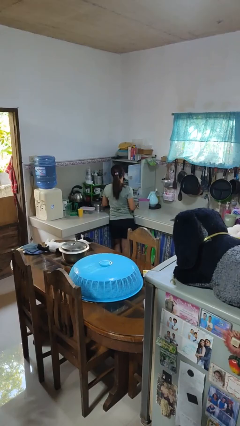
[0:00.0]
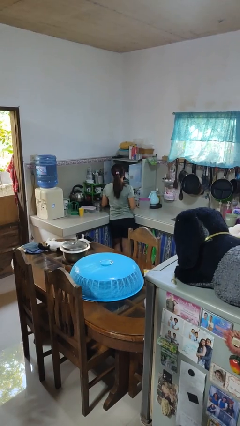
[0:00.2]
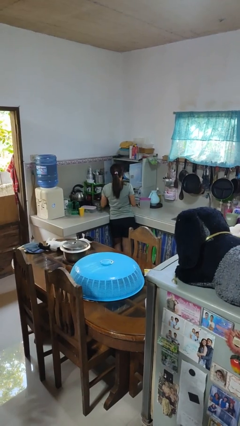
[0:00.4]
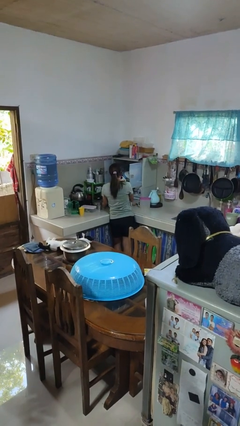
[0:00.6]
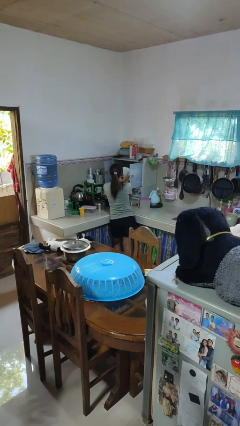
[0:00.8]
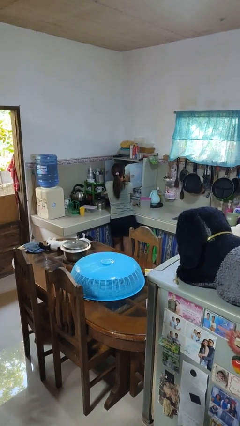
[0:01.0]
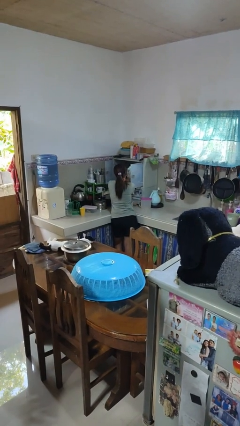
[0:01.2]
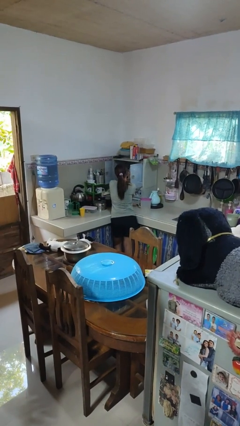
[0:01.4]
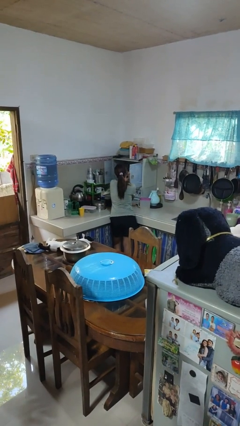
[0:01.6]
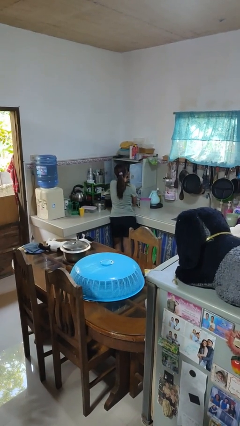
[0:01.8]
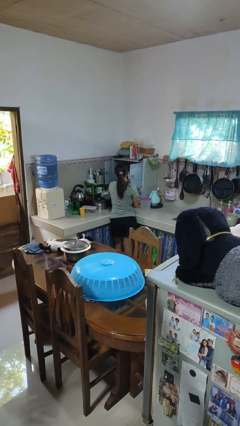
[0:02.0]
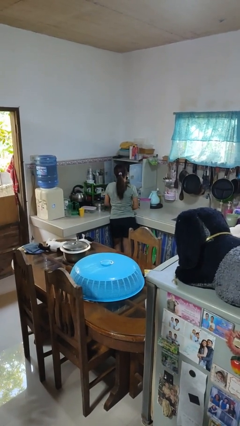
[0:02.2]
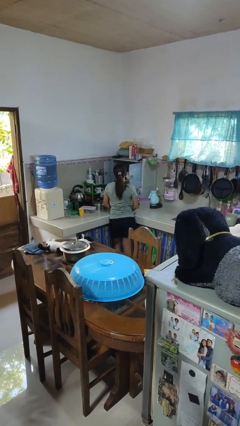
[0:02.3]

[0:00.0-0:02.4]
person puts object into kitchen drawer

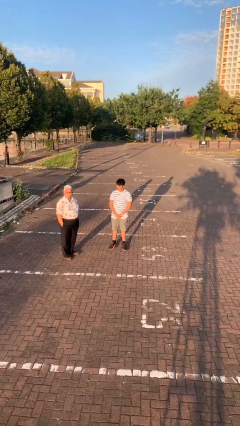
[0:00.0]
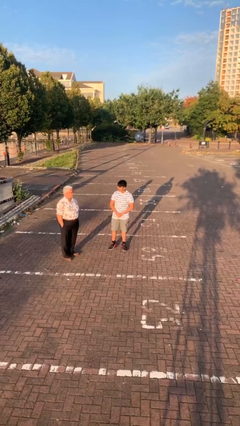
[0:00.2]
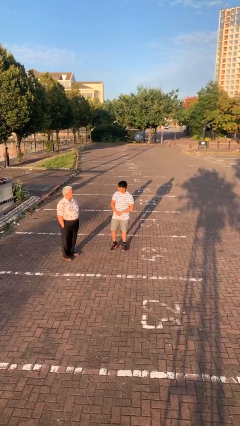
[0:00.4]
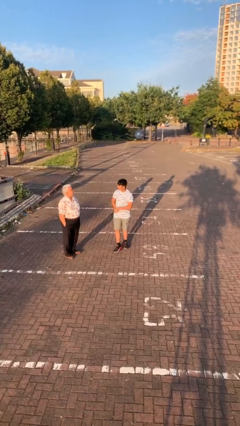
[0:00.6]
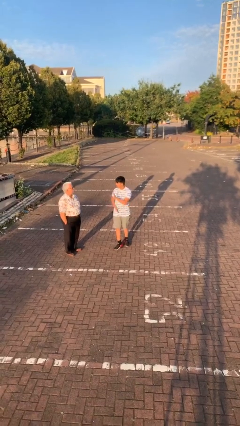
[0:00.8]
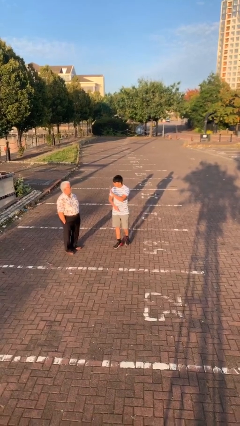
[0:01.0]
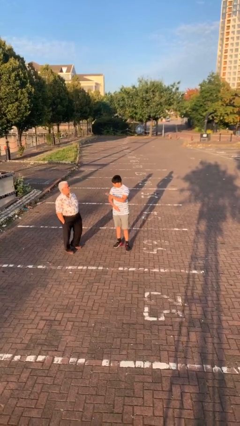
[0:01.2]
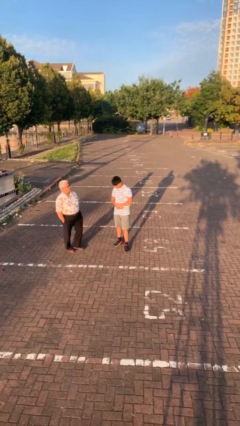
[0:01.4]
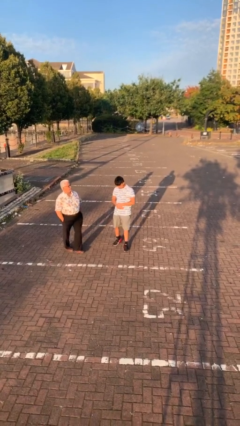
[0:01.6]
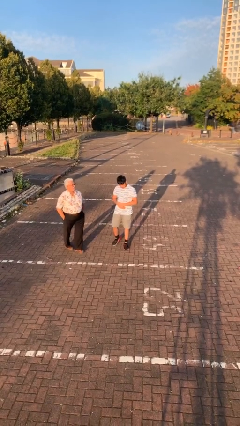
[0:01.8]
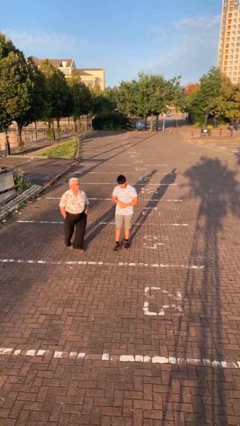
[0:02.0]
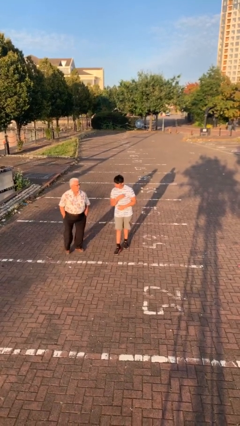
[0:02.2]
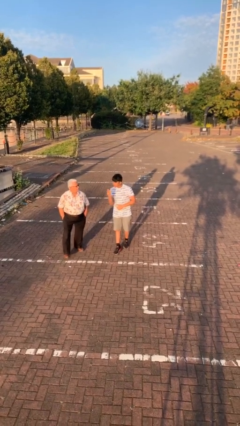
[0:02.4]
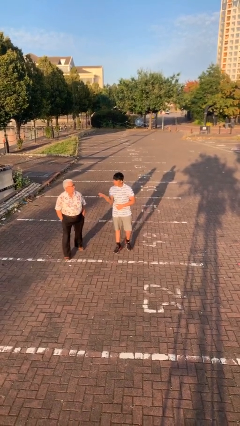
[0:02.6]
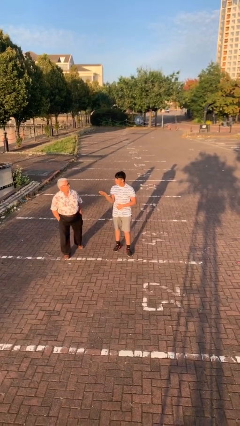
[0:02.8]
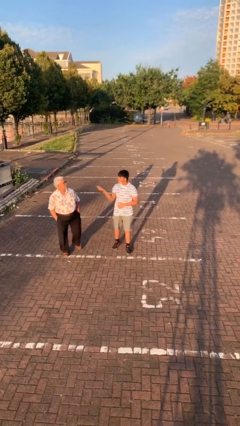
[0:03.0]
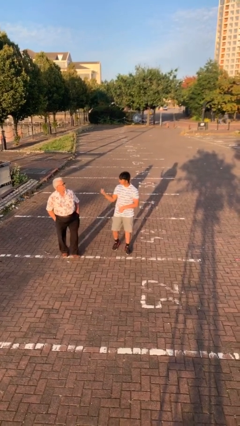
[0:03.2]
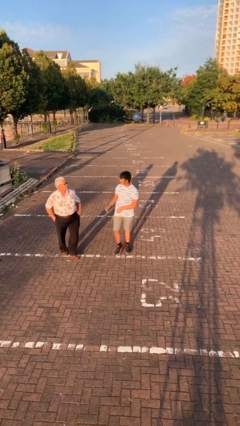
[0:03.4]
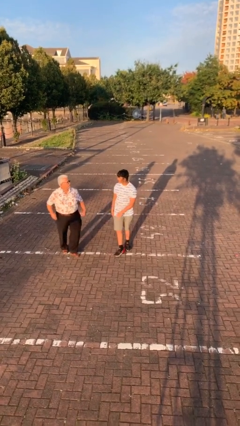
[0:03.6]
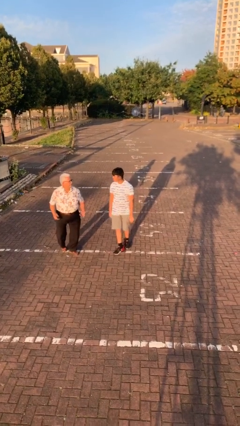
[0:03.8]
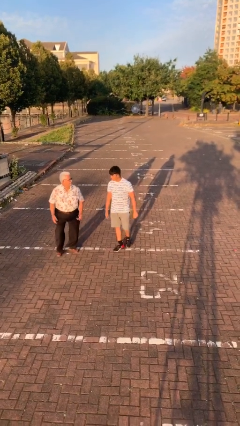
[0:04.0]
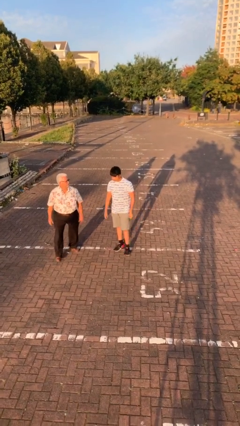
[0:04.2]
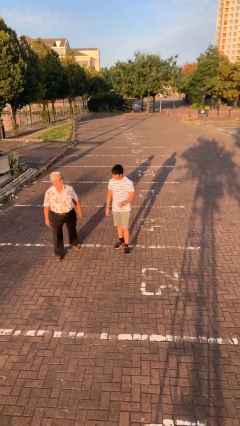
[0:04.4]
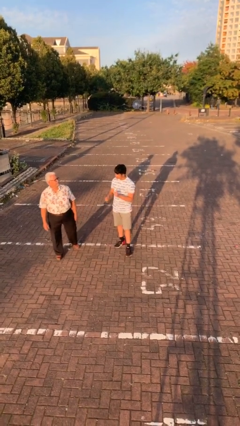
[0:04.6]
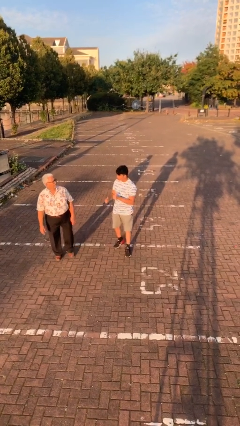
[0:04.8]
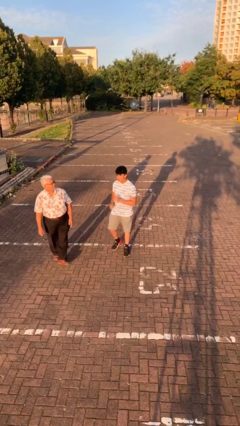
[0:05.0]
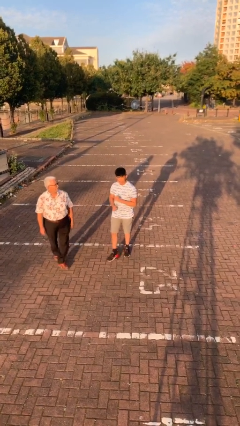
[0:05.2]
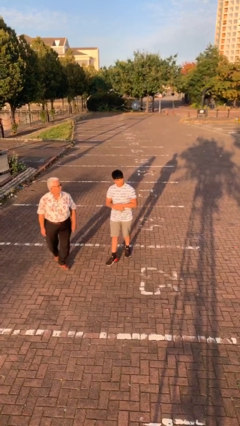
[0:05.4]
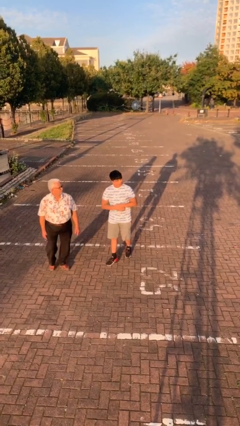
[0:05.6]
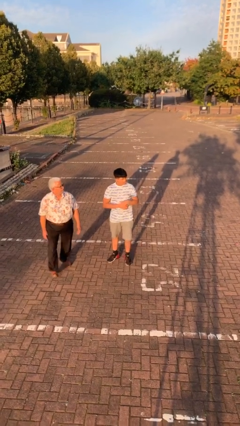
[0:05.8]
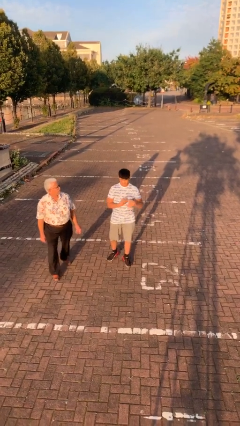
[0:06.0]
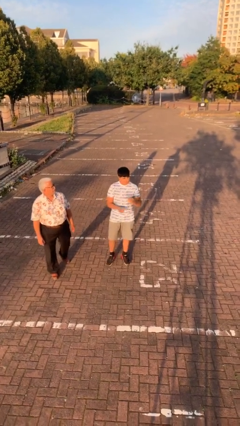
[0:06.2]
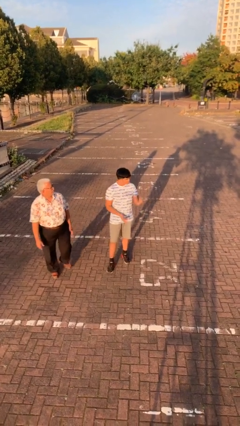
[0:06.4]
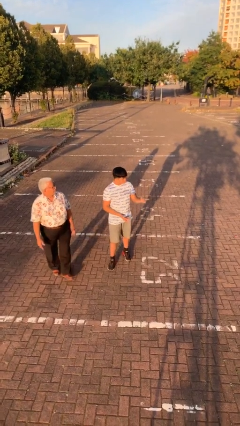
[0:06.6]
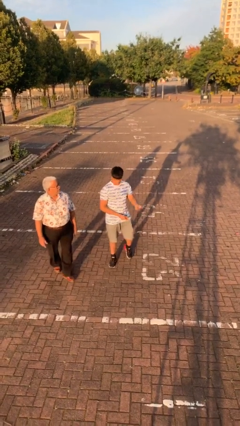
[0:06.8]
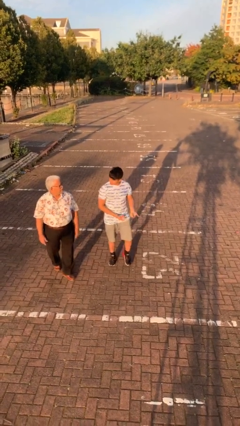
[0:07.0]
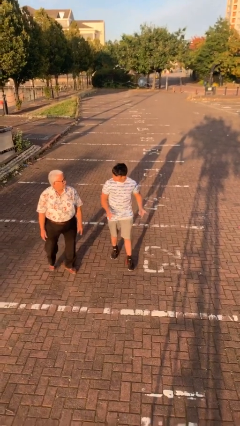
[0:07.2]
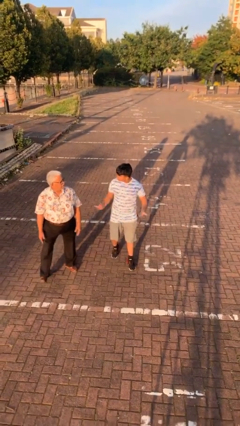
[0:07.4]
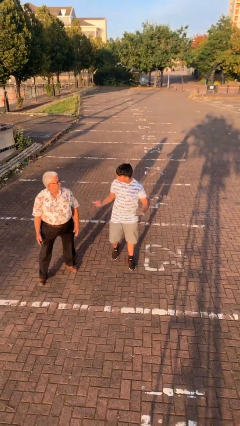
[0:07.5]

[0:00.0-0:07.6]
person talks to person

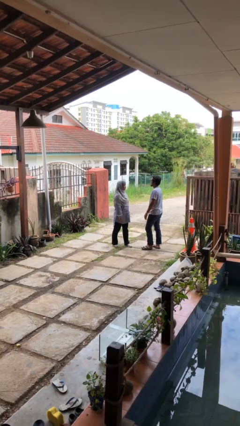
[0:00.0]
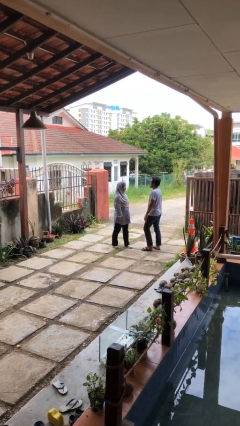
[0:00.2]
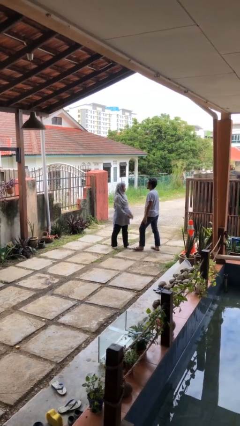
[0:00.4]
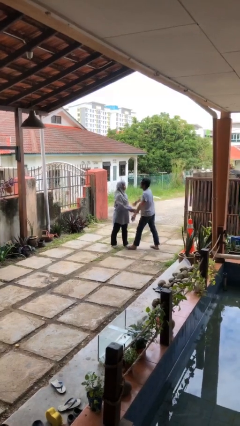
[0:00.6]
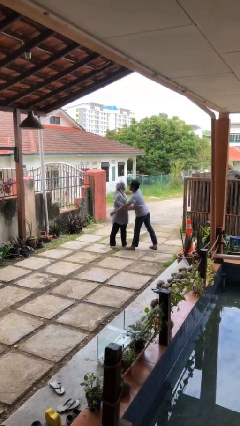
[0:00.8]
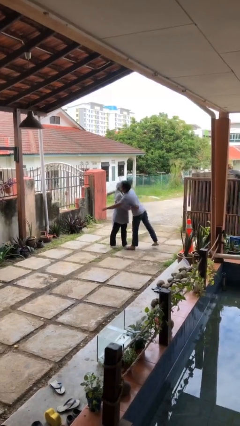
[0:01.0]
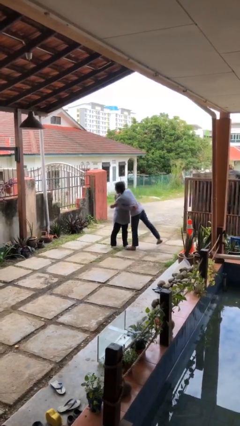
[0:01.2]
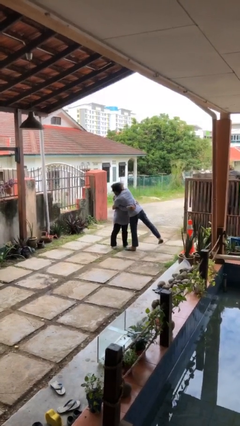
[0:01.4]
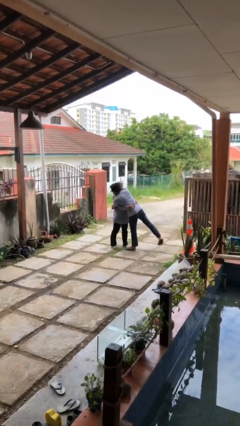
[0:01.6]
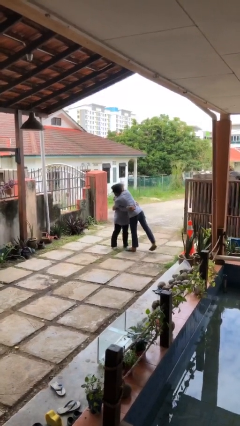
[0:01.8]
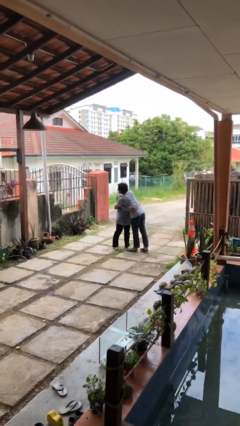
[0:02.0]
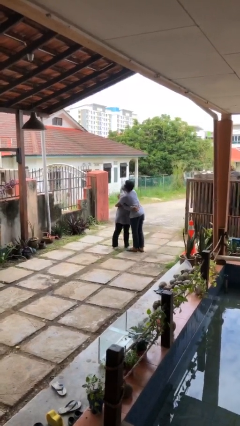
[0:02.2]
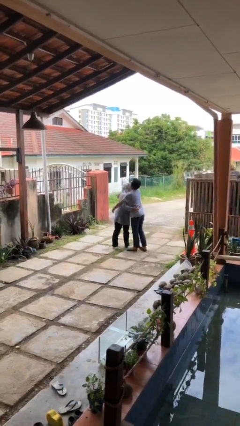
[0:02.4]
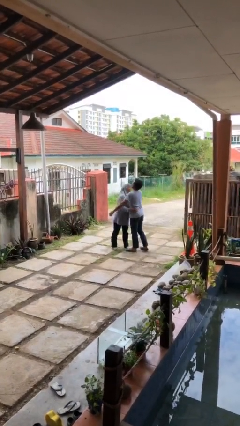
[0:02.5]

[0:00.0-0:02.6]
person embraces person

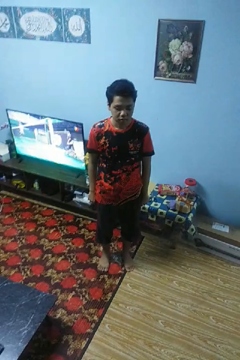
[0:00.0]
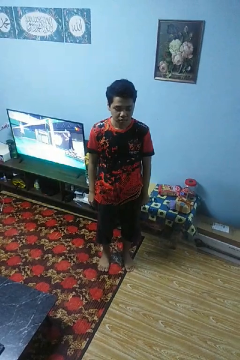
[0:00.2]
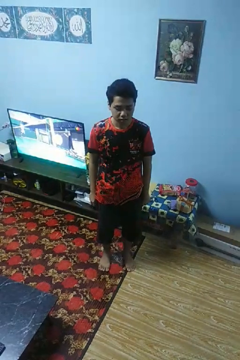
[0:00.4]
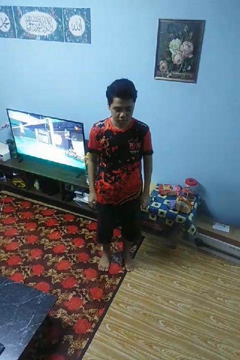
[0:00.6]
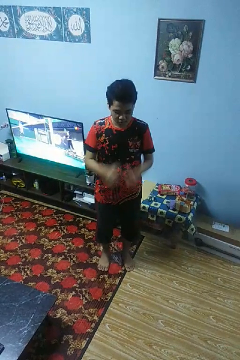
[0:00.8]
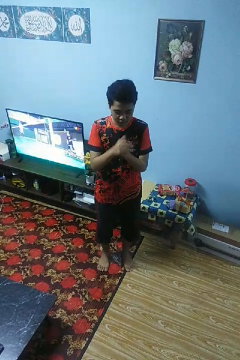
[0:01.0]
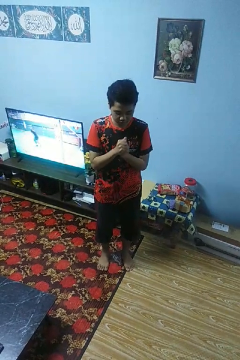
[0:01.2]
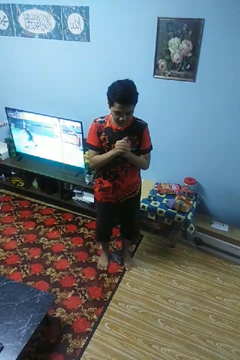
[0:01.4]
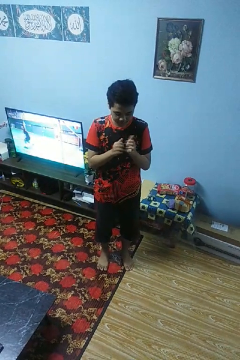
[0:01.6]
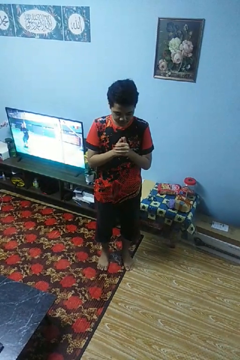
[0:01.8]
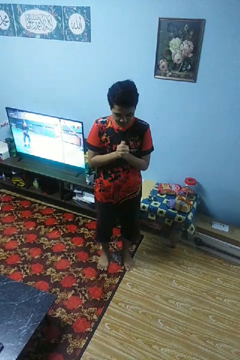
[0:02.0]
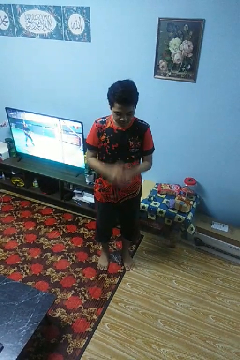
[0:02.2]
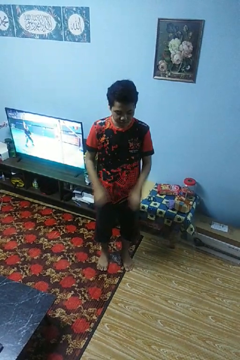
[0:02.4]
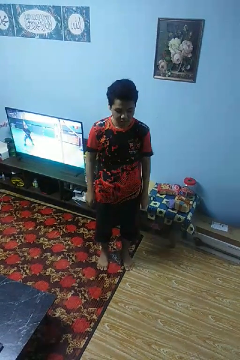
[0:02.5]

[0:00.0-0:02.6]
person cracks knuckles

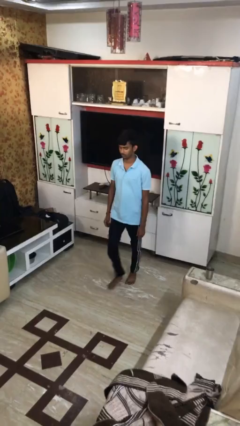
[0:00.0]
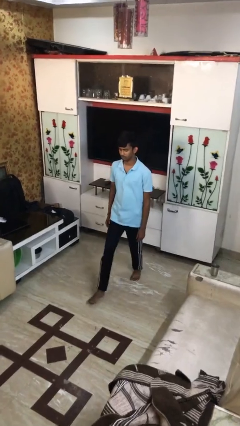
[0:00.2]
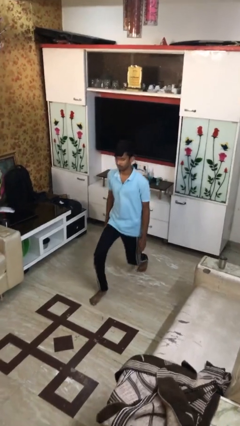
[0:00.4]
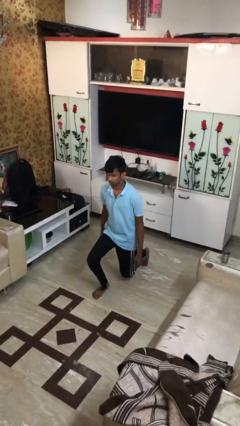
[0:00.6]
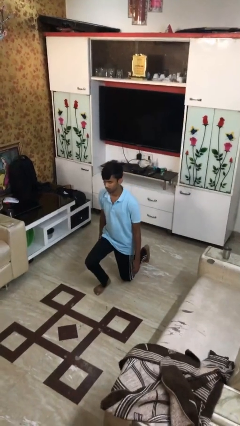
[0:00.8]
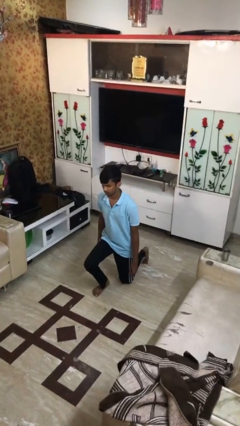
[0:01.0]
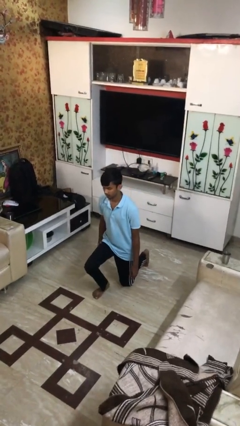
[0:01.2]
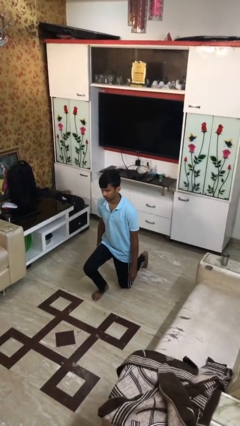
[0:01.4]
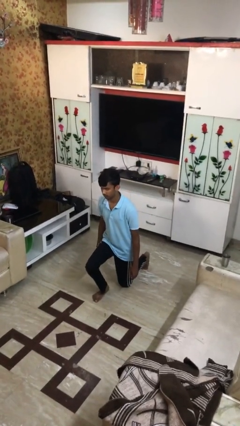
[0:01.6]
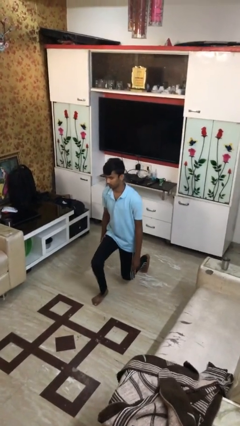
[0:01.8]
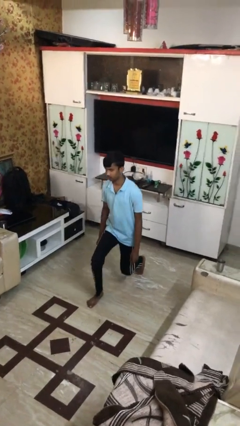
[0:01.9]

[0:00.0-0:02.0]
person exercises with lunges

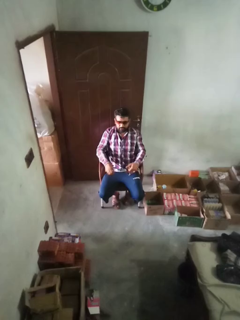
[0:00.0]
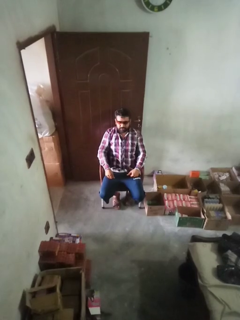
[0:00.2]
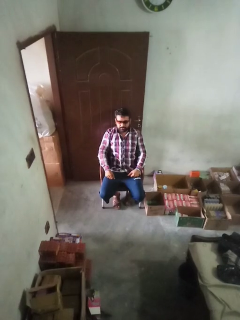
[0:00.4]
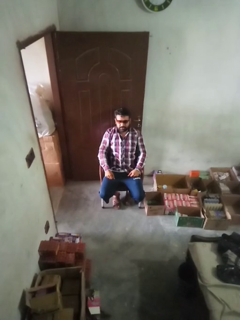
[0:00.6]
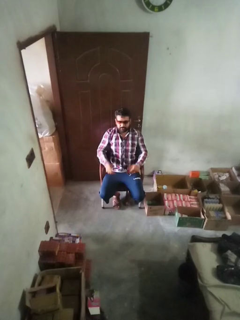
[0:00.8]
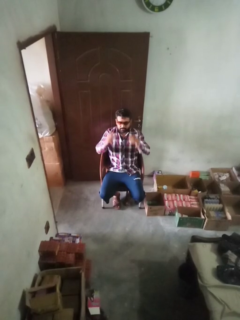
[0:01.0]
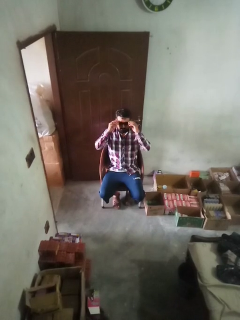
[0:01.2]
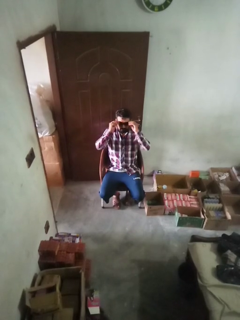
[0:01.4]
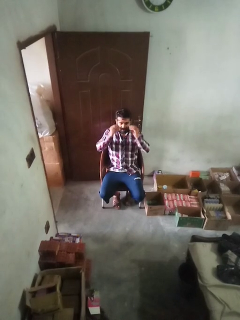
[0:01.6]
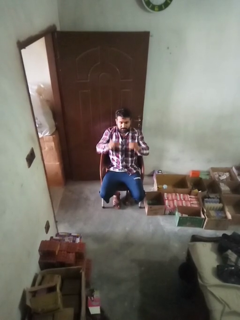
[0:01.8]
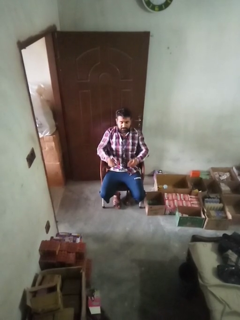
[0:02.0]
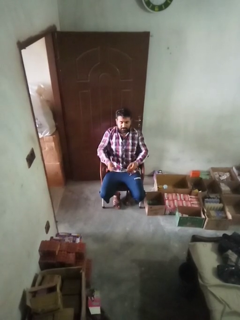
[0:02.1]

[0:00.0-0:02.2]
person takes off sunglasses
